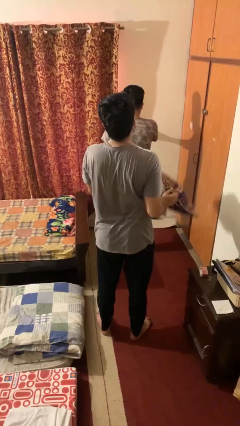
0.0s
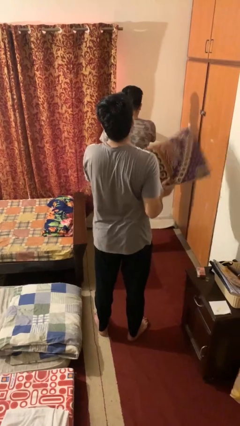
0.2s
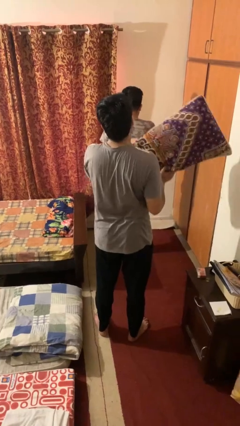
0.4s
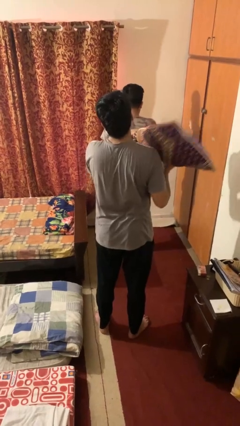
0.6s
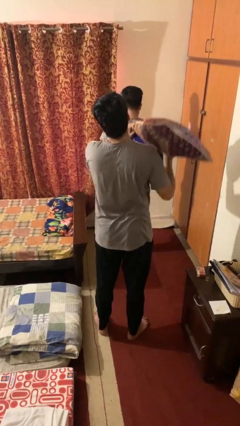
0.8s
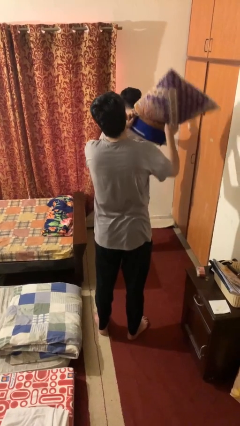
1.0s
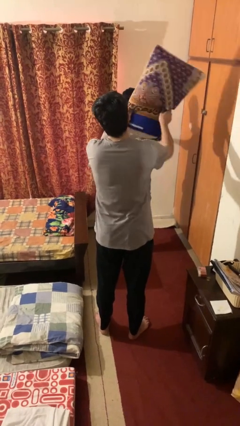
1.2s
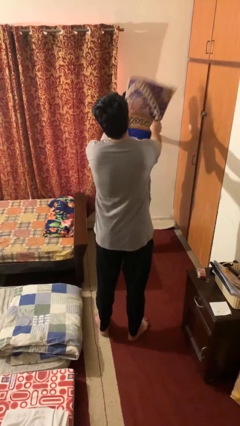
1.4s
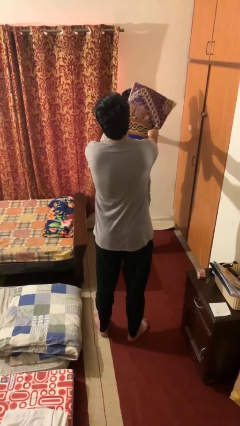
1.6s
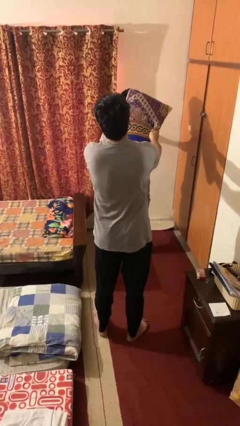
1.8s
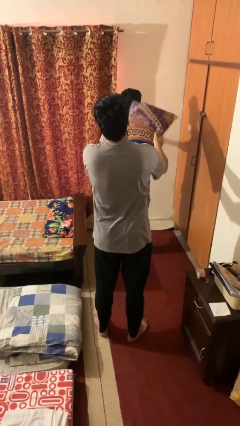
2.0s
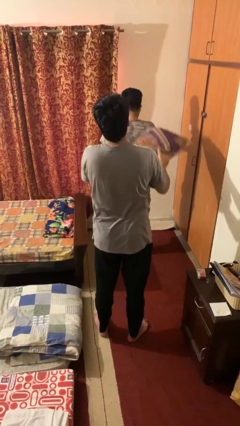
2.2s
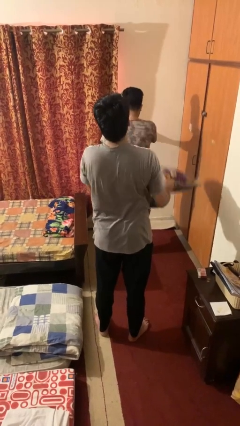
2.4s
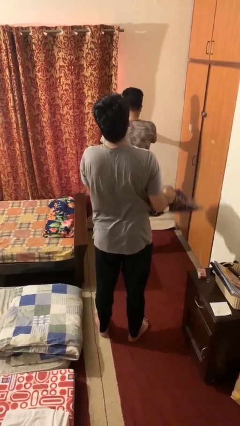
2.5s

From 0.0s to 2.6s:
person hits person with pillow

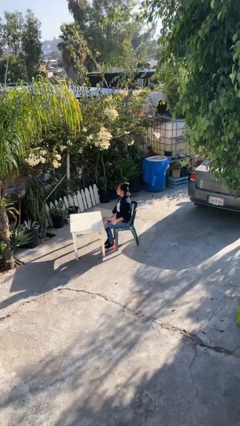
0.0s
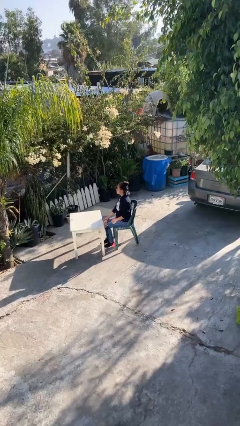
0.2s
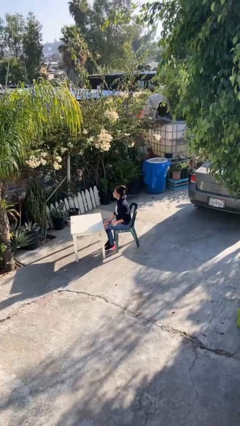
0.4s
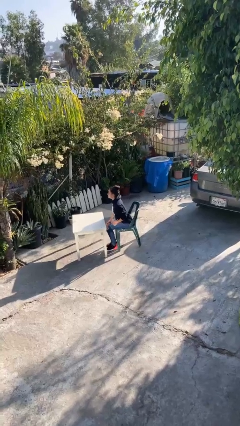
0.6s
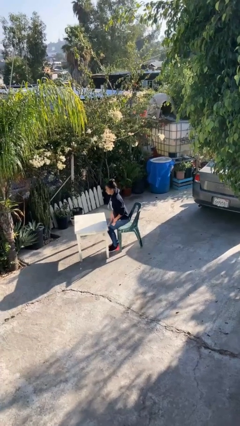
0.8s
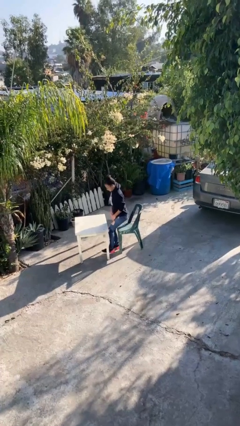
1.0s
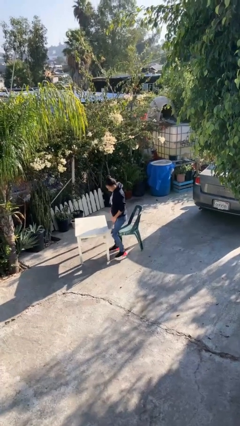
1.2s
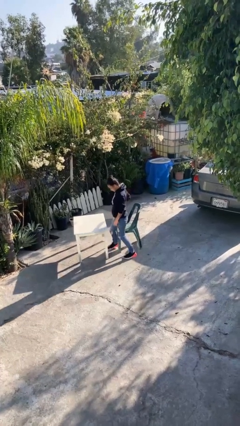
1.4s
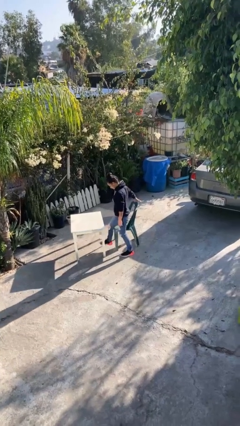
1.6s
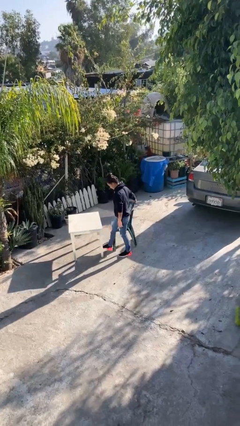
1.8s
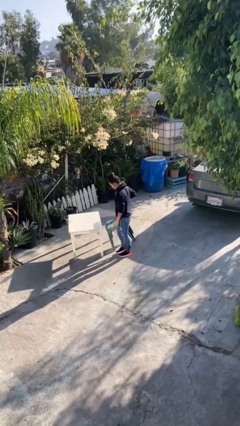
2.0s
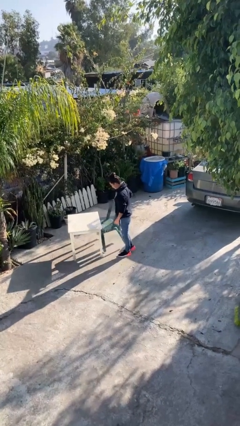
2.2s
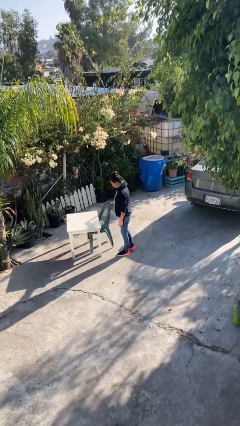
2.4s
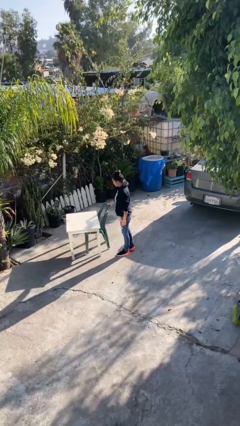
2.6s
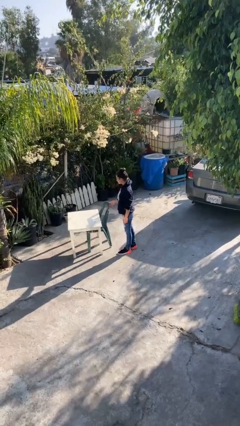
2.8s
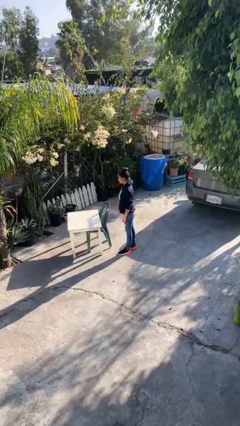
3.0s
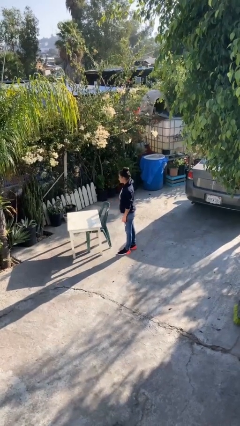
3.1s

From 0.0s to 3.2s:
person stands up

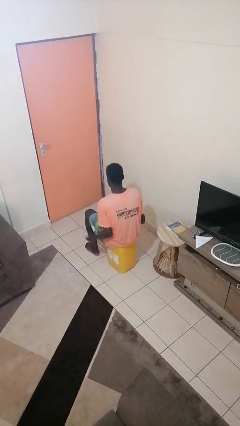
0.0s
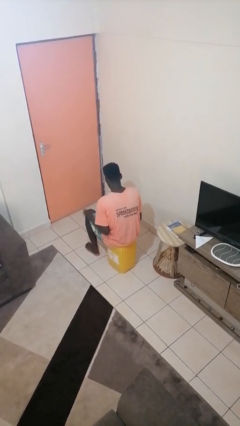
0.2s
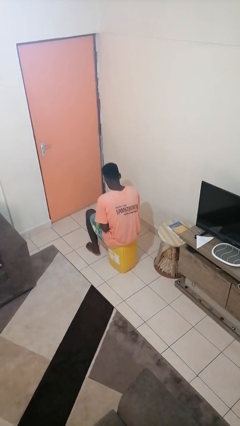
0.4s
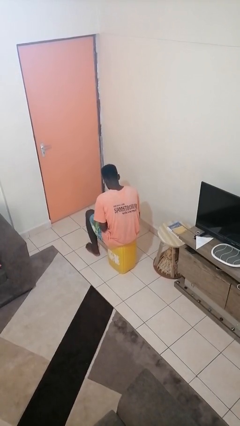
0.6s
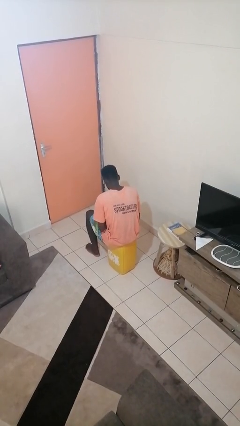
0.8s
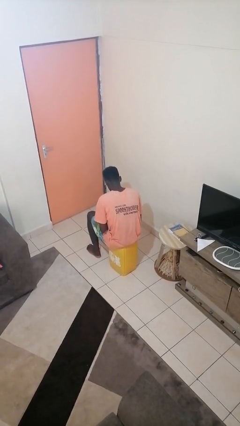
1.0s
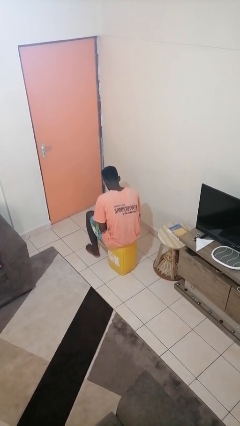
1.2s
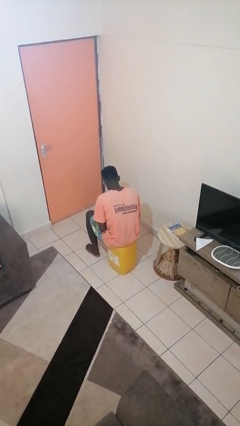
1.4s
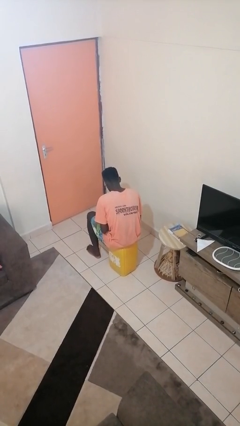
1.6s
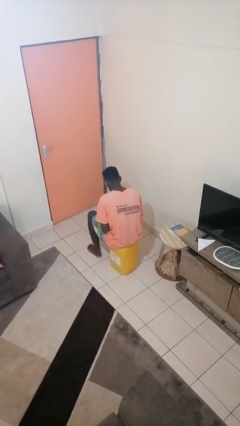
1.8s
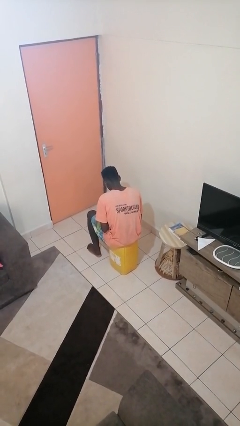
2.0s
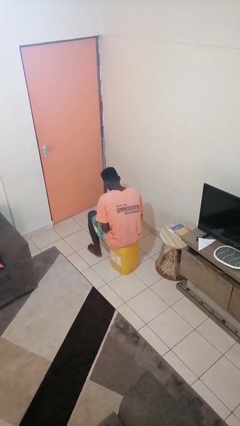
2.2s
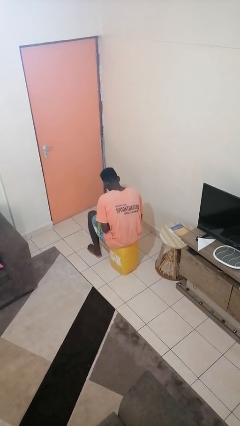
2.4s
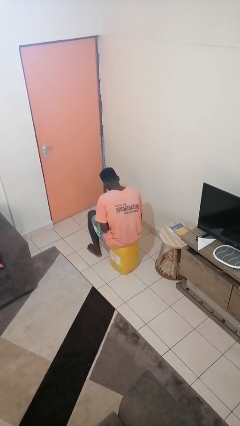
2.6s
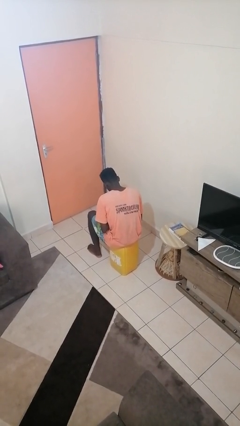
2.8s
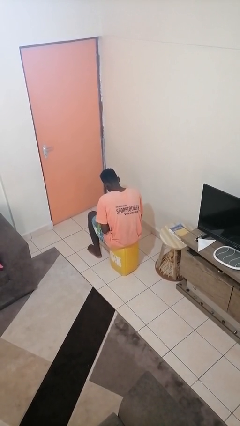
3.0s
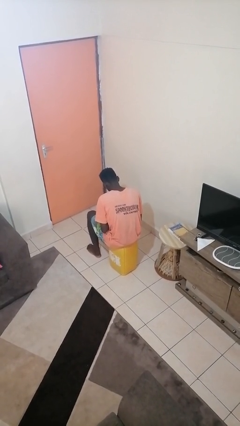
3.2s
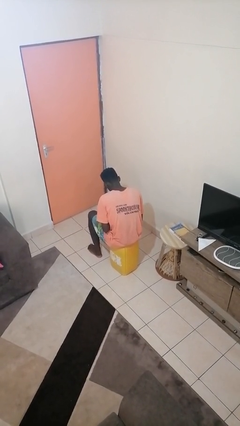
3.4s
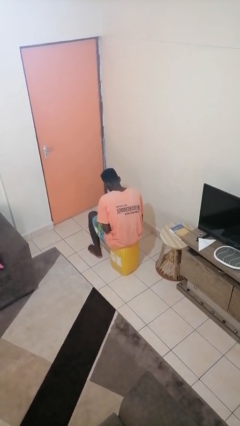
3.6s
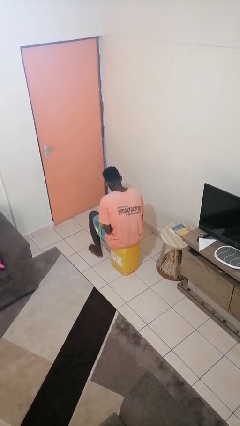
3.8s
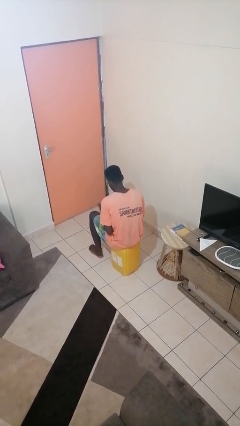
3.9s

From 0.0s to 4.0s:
person looks at hands in lap

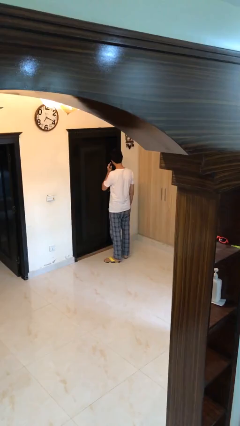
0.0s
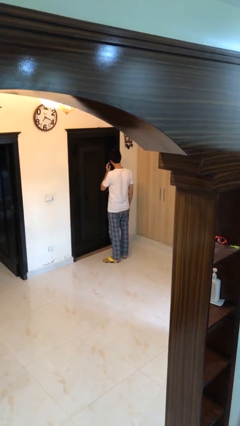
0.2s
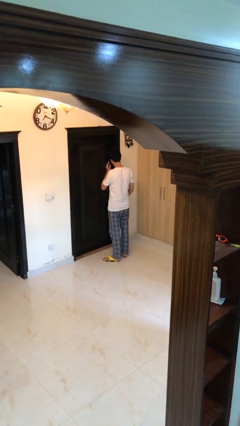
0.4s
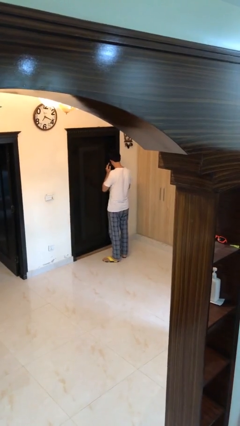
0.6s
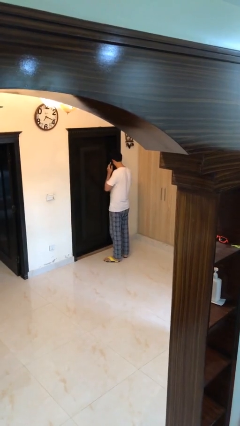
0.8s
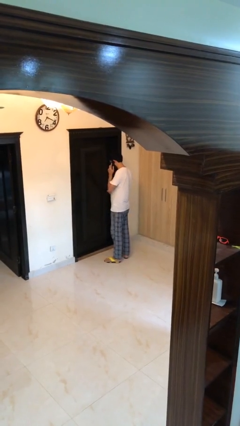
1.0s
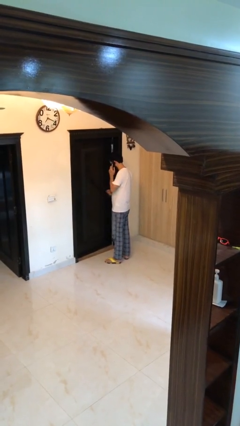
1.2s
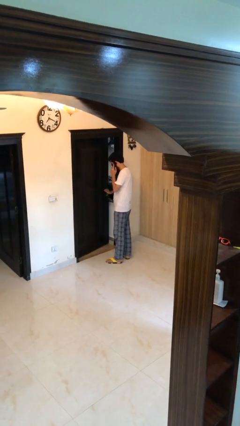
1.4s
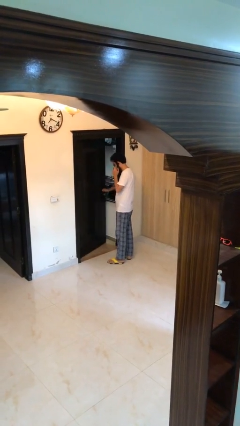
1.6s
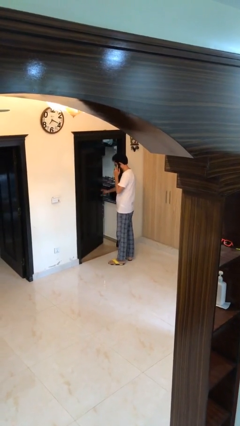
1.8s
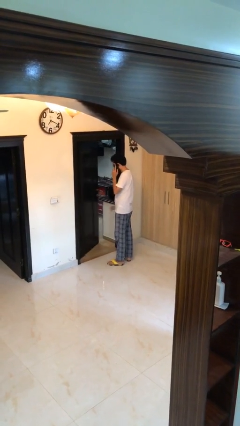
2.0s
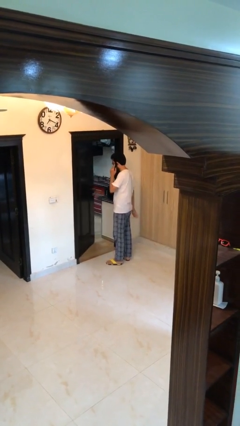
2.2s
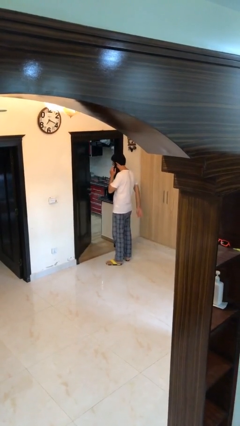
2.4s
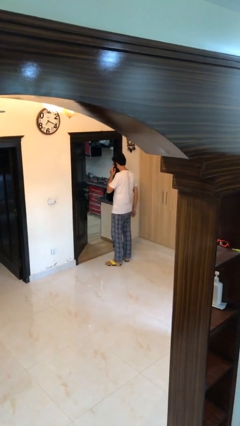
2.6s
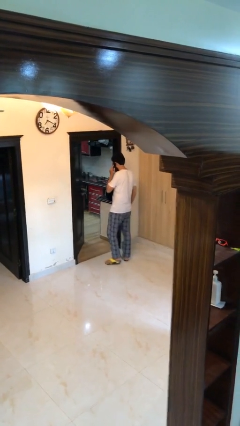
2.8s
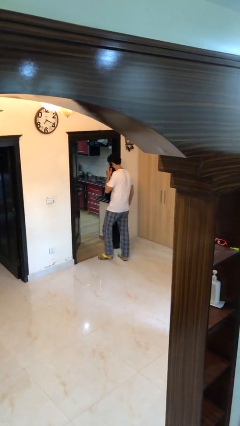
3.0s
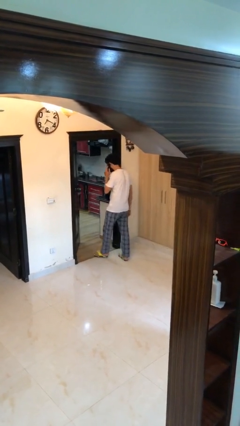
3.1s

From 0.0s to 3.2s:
person opens facility door

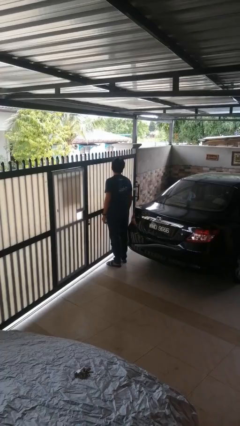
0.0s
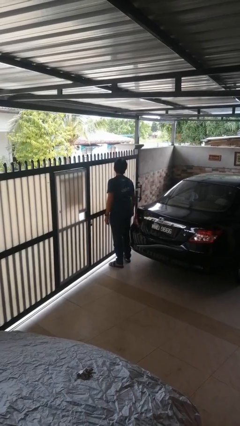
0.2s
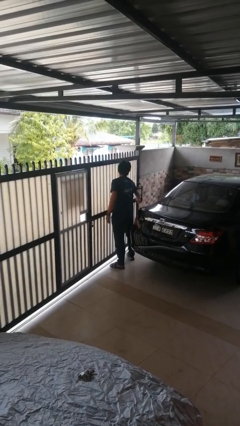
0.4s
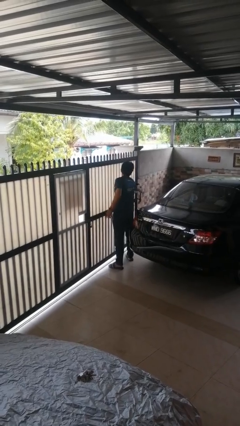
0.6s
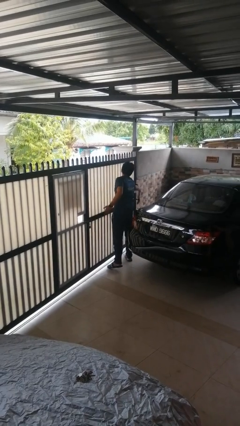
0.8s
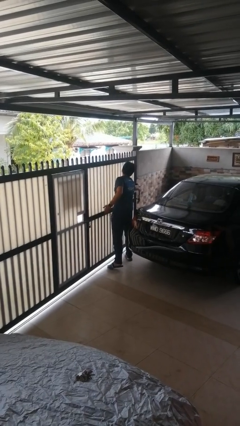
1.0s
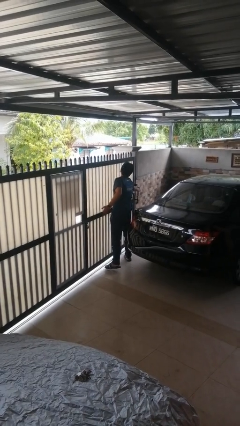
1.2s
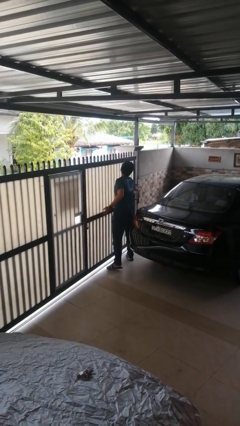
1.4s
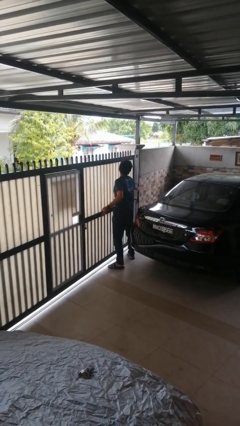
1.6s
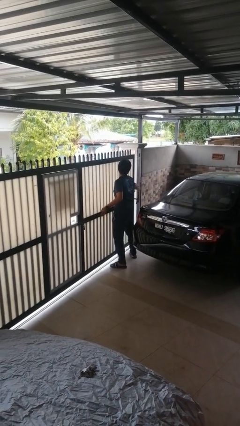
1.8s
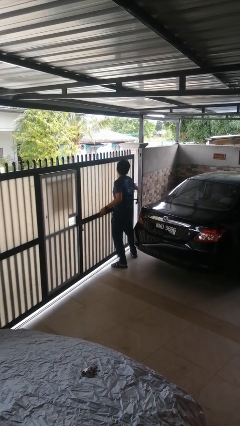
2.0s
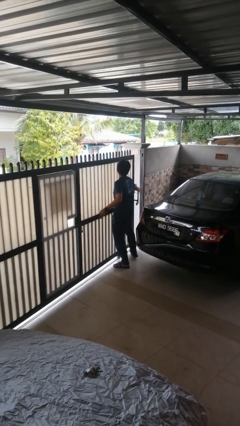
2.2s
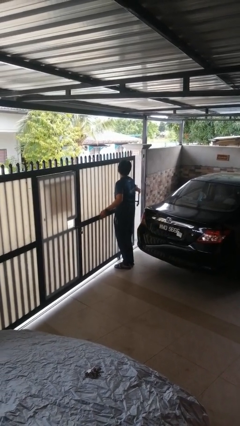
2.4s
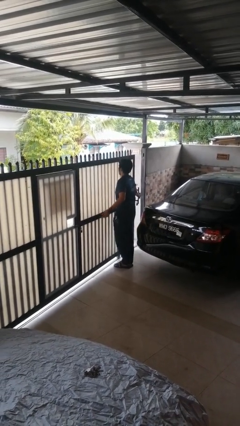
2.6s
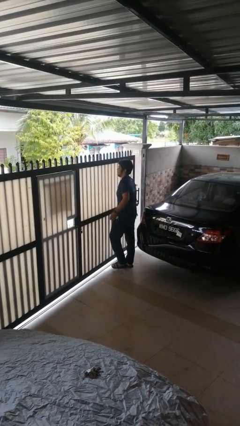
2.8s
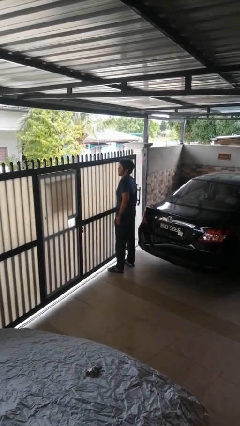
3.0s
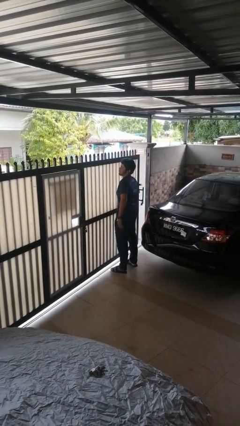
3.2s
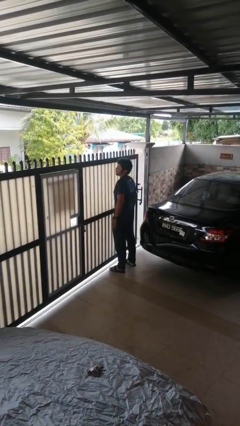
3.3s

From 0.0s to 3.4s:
person opens sliding door

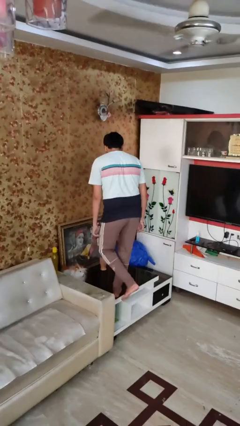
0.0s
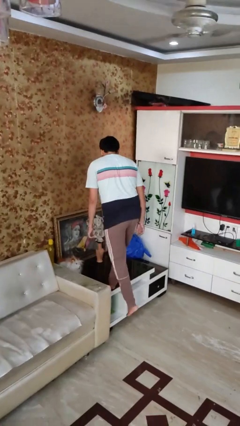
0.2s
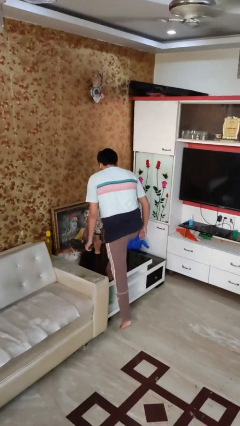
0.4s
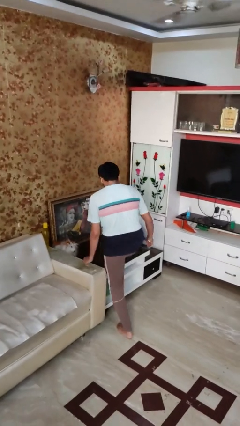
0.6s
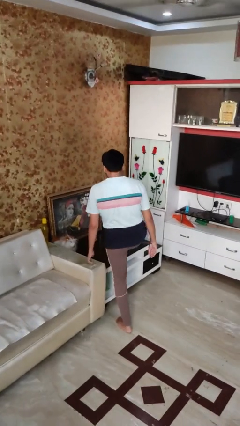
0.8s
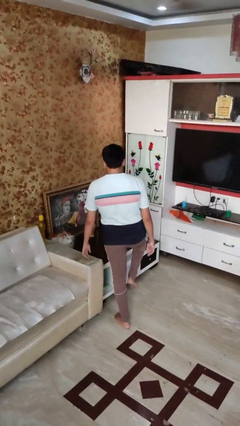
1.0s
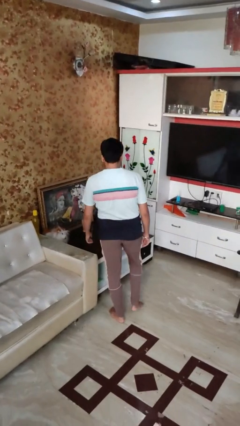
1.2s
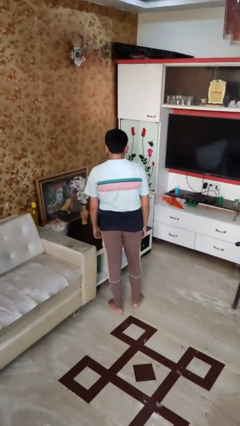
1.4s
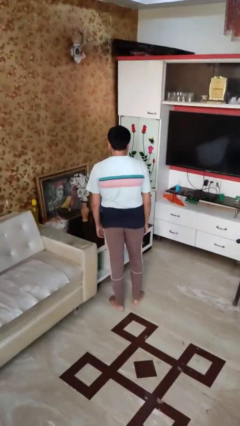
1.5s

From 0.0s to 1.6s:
person climbs off table
